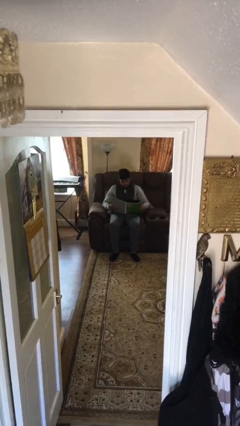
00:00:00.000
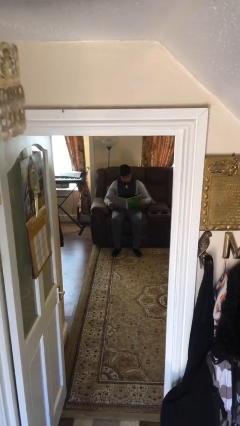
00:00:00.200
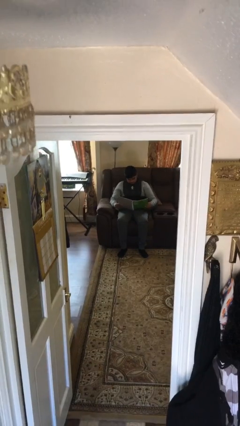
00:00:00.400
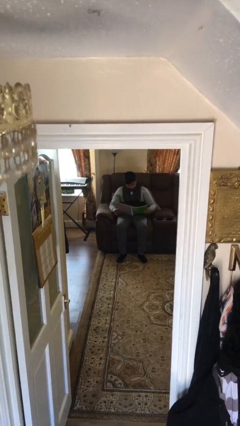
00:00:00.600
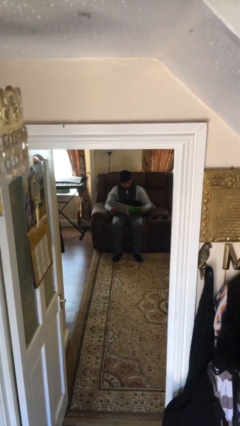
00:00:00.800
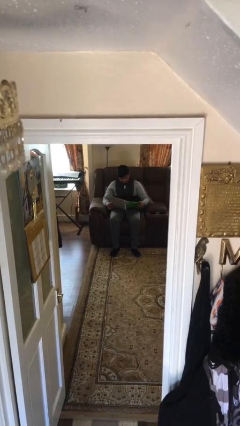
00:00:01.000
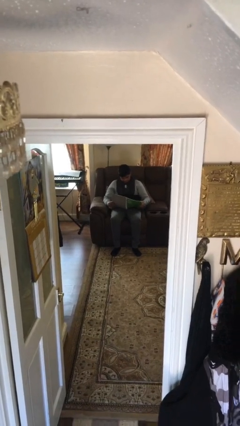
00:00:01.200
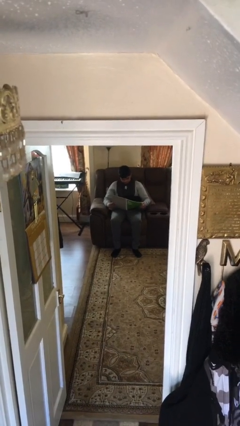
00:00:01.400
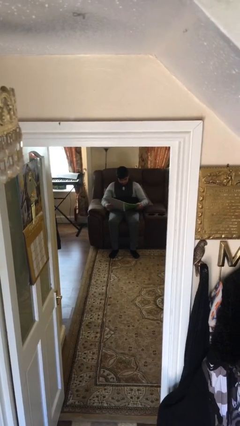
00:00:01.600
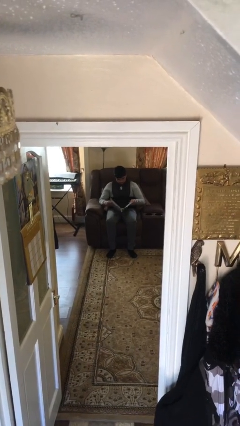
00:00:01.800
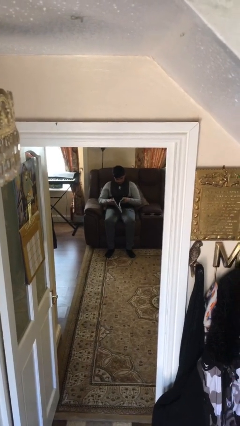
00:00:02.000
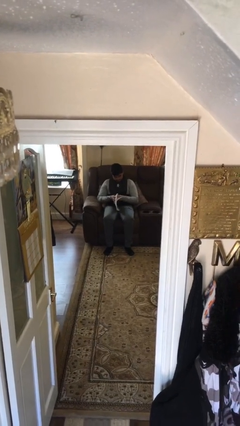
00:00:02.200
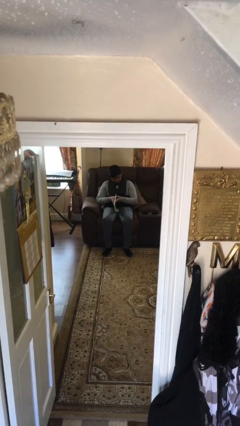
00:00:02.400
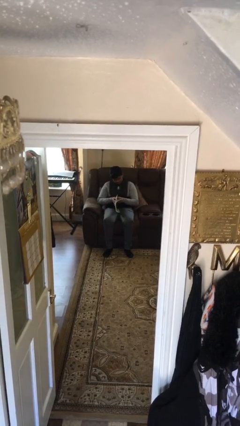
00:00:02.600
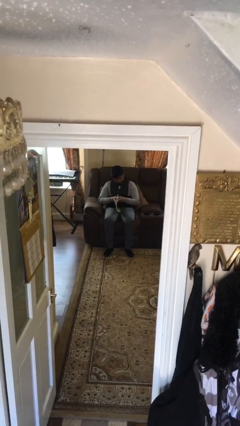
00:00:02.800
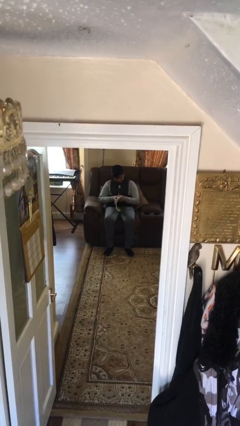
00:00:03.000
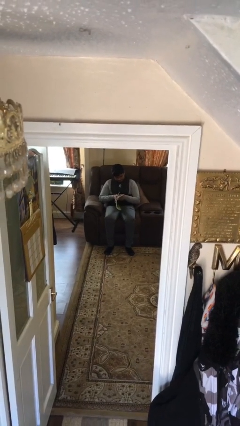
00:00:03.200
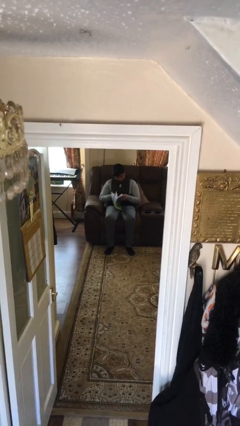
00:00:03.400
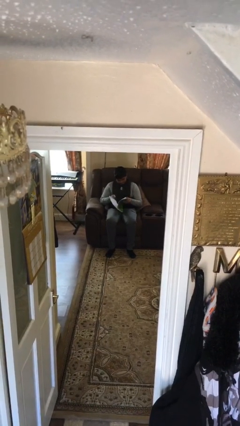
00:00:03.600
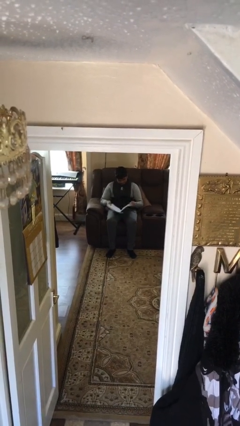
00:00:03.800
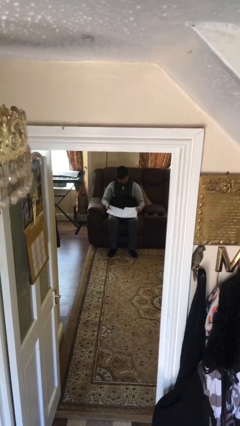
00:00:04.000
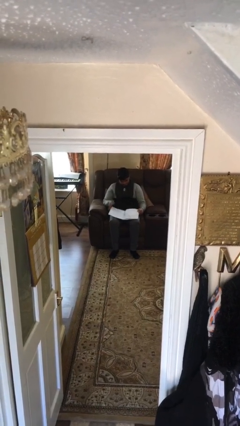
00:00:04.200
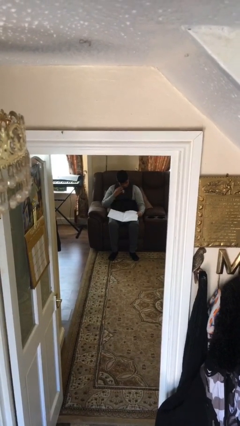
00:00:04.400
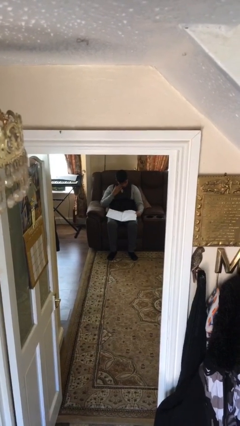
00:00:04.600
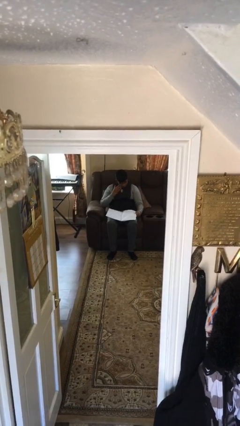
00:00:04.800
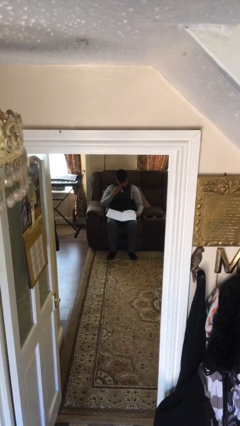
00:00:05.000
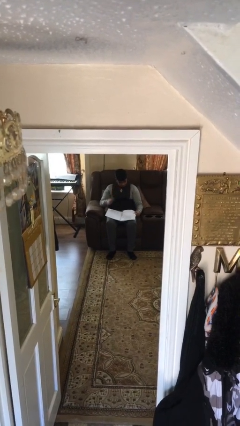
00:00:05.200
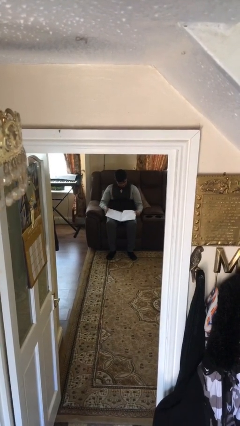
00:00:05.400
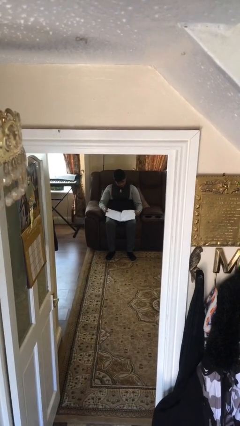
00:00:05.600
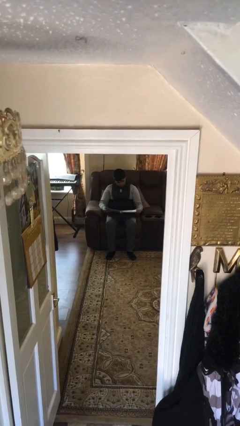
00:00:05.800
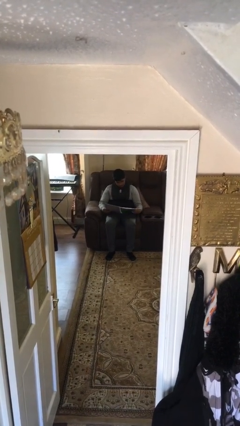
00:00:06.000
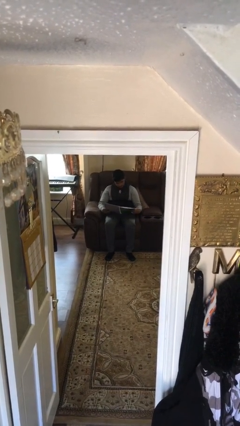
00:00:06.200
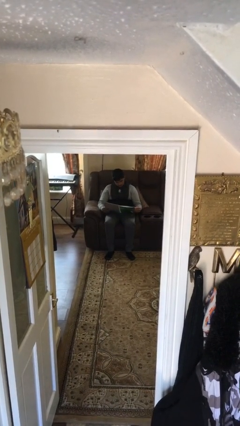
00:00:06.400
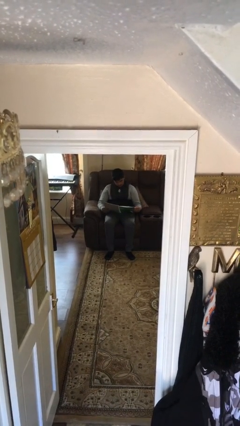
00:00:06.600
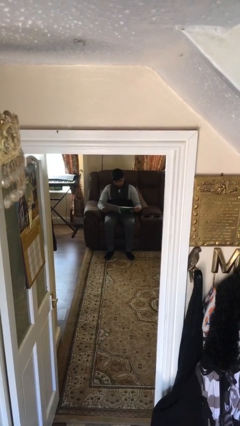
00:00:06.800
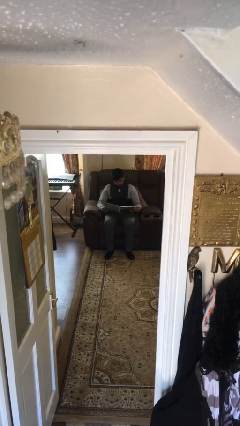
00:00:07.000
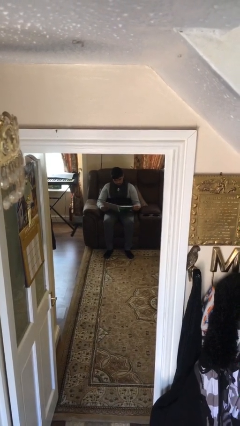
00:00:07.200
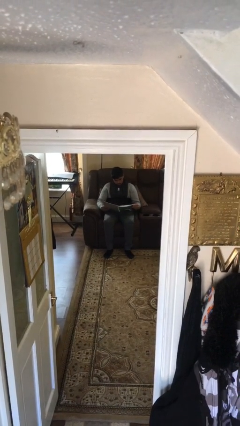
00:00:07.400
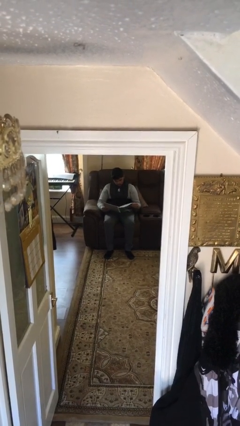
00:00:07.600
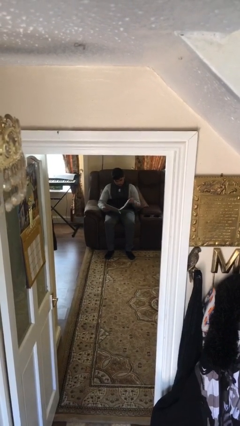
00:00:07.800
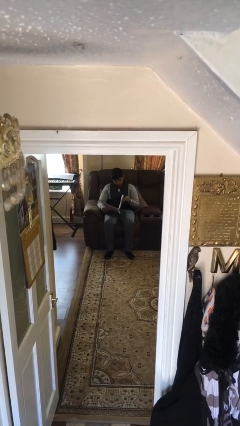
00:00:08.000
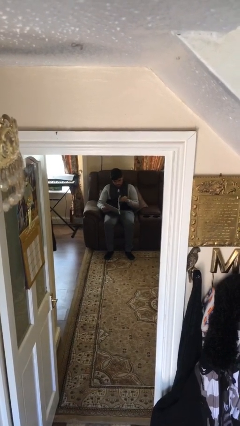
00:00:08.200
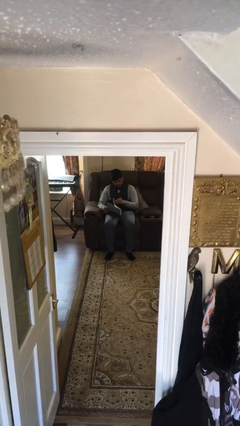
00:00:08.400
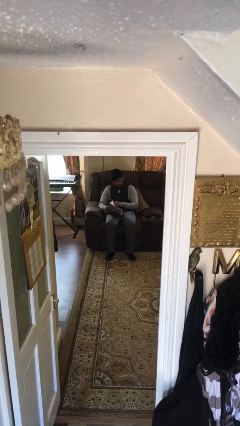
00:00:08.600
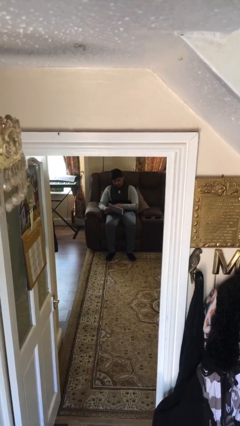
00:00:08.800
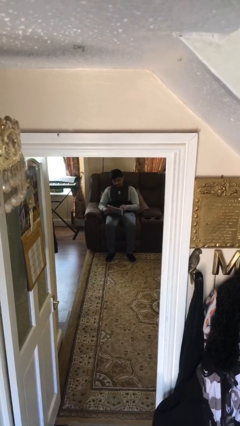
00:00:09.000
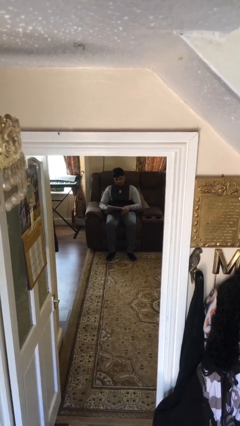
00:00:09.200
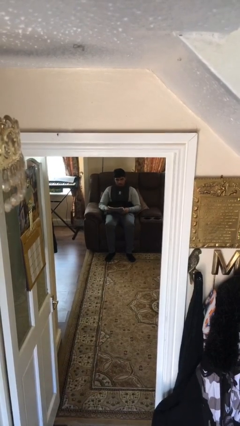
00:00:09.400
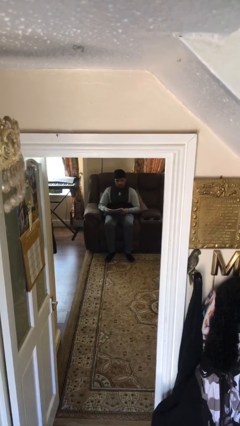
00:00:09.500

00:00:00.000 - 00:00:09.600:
person reads document

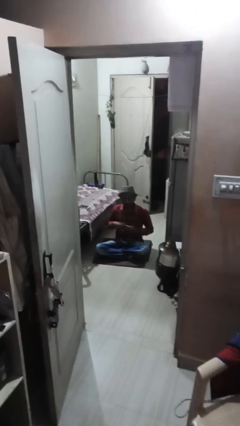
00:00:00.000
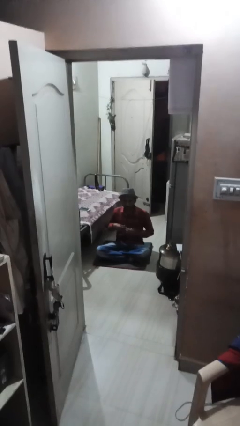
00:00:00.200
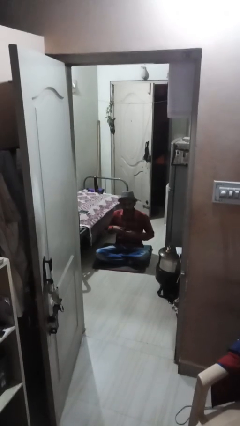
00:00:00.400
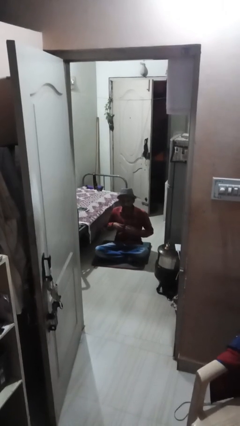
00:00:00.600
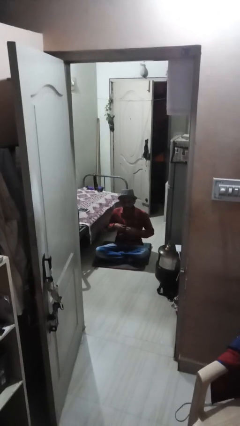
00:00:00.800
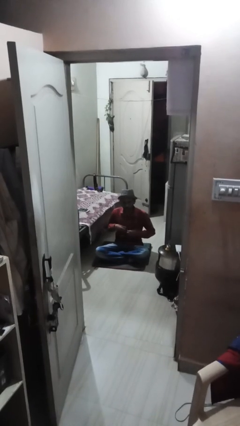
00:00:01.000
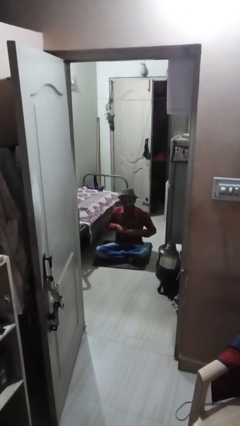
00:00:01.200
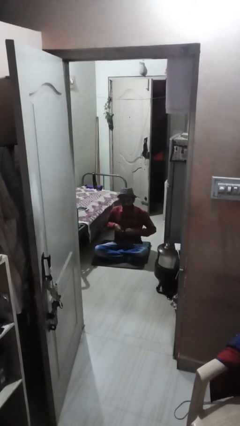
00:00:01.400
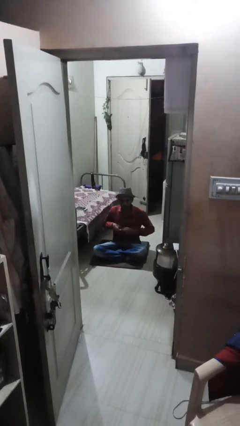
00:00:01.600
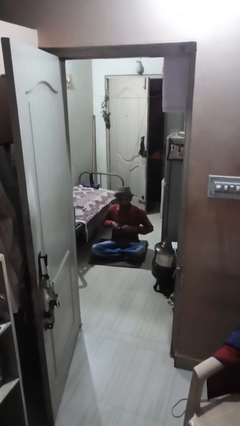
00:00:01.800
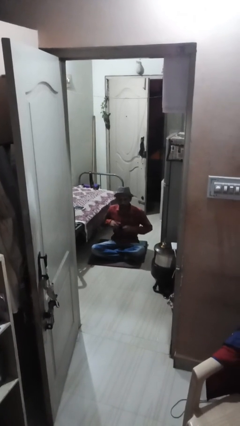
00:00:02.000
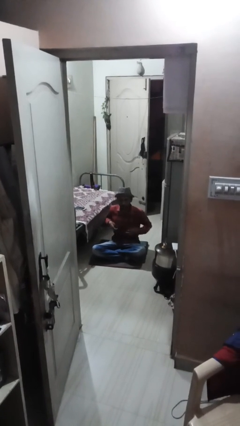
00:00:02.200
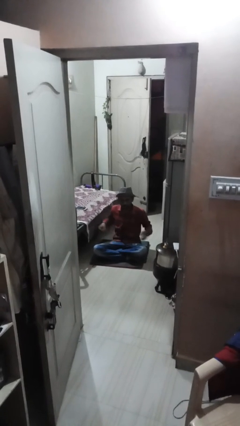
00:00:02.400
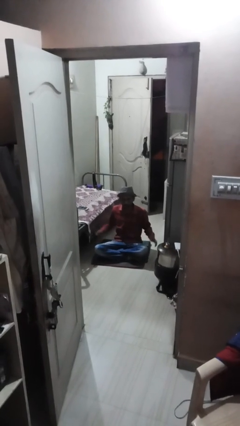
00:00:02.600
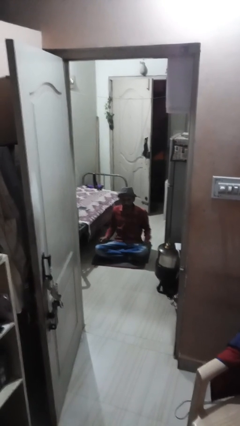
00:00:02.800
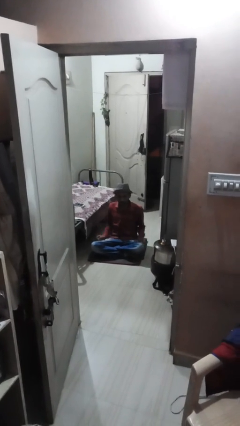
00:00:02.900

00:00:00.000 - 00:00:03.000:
person unbuttons shirt

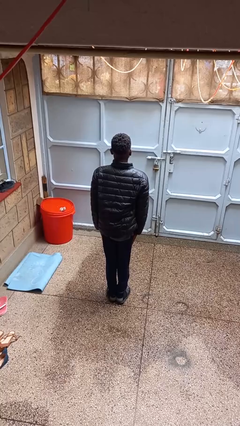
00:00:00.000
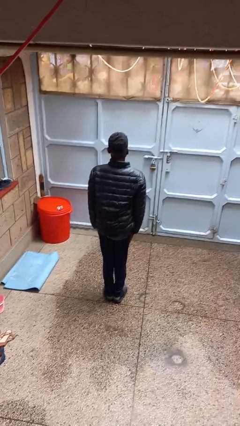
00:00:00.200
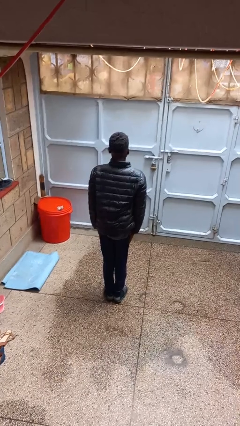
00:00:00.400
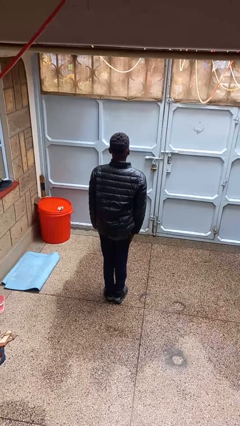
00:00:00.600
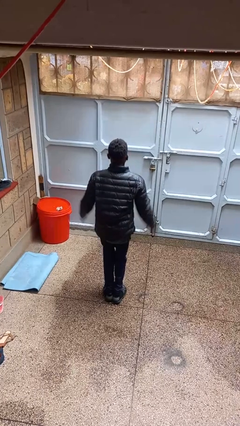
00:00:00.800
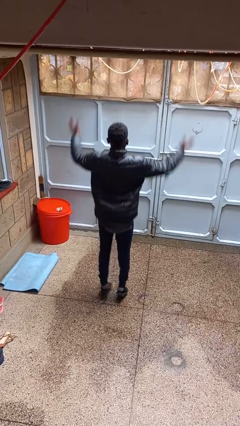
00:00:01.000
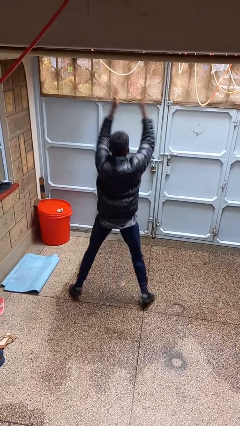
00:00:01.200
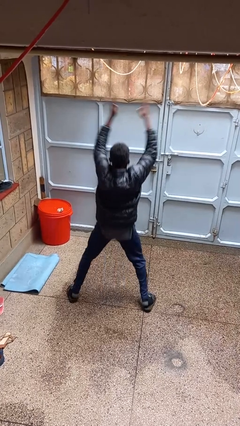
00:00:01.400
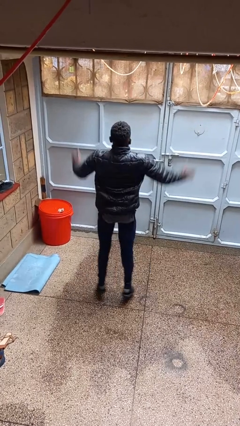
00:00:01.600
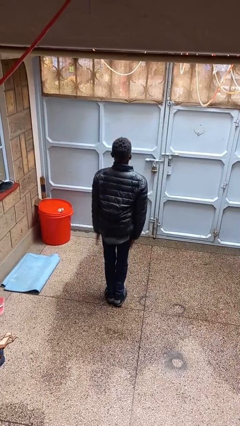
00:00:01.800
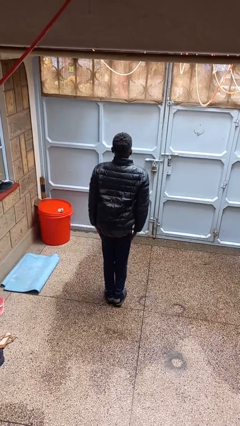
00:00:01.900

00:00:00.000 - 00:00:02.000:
person exercises with jumping jacks

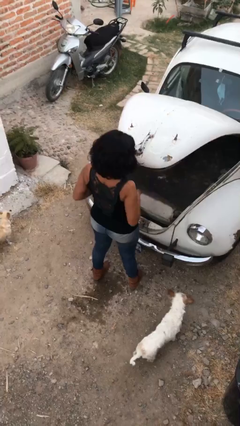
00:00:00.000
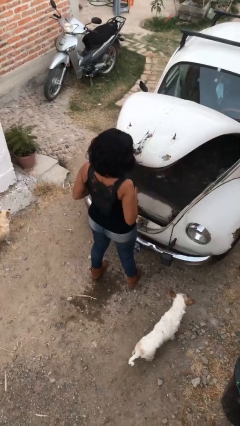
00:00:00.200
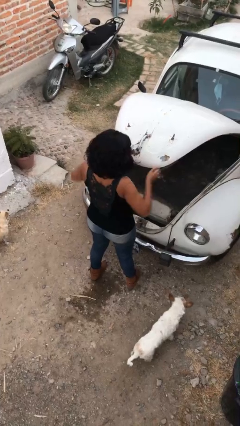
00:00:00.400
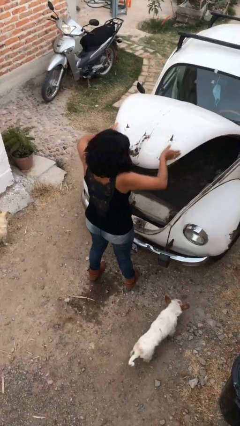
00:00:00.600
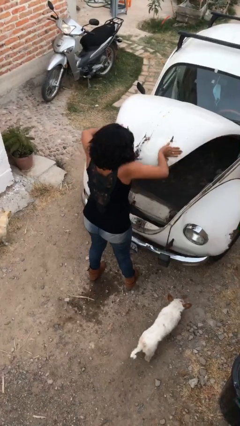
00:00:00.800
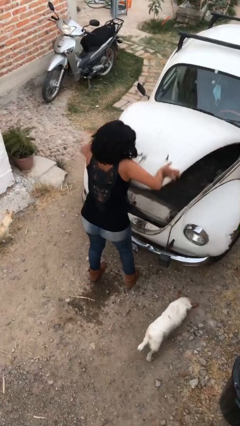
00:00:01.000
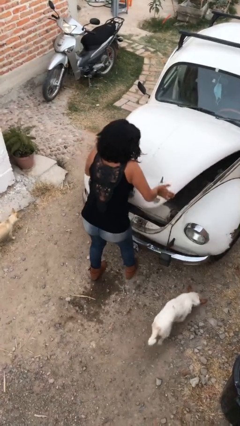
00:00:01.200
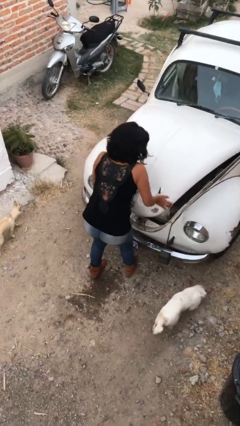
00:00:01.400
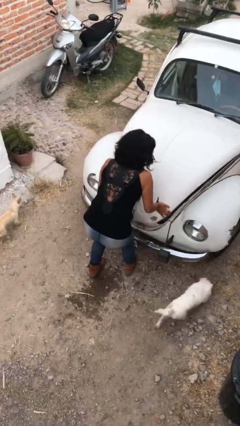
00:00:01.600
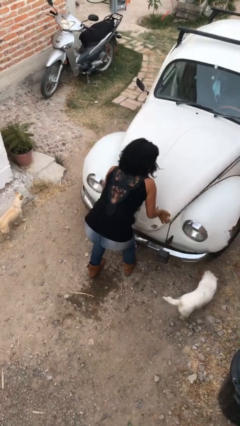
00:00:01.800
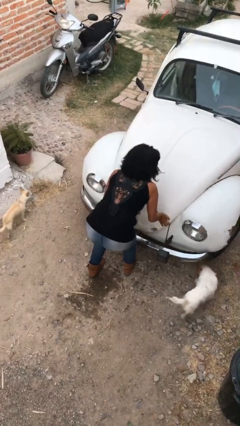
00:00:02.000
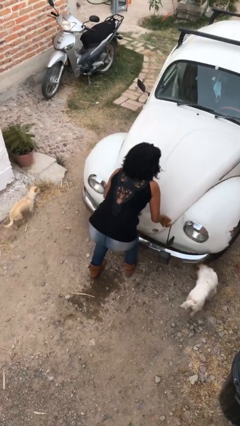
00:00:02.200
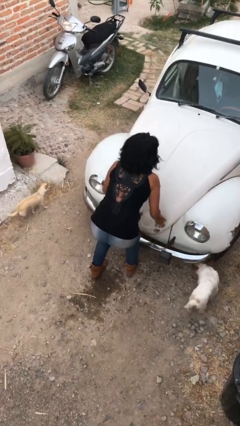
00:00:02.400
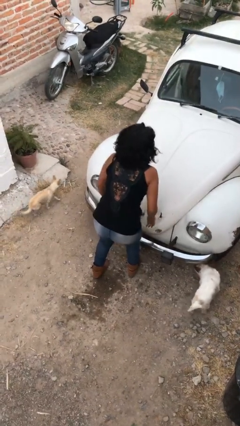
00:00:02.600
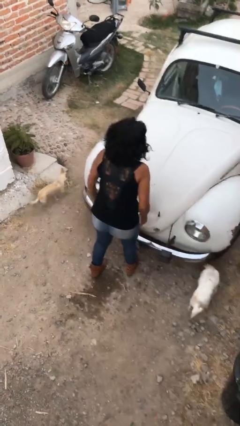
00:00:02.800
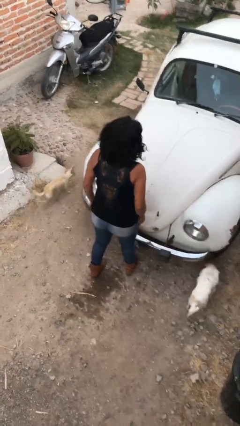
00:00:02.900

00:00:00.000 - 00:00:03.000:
person closes car trunk
